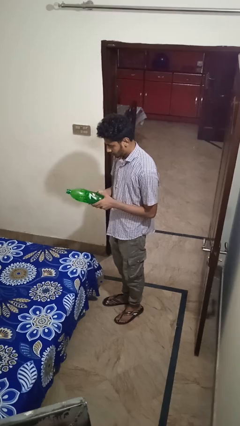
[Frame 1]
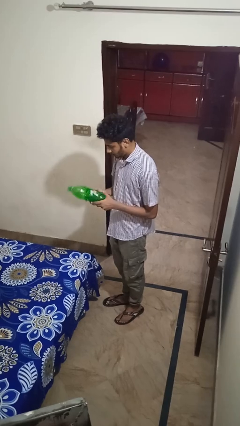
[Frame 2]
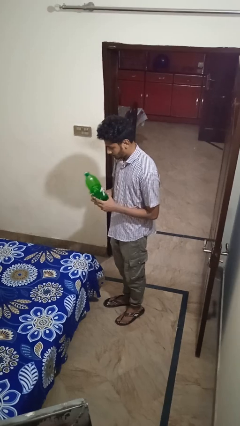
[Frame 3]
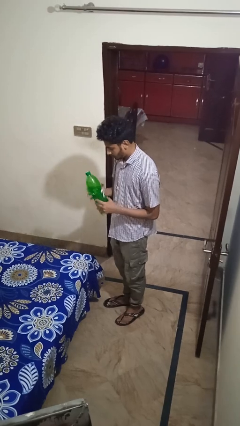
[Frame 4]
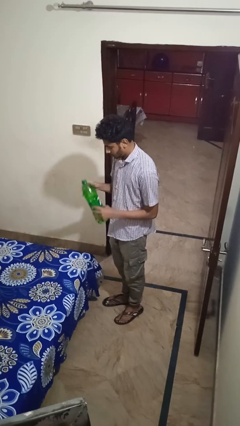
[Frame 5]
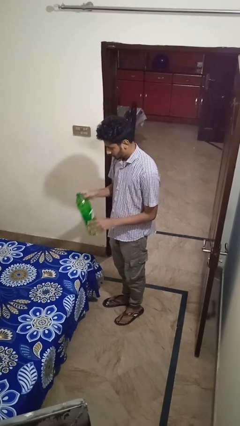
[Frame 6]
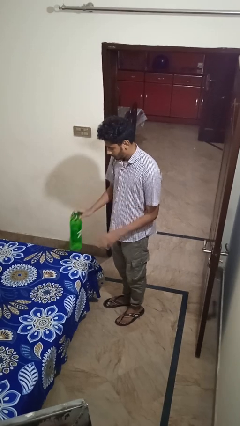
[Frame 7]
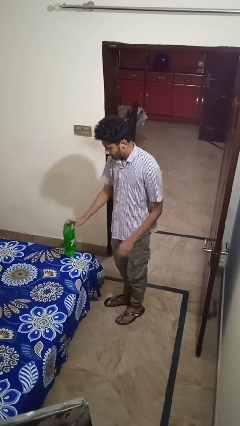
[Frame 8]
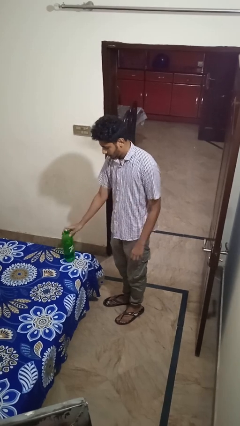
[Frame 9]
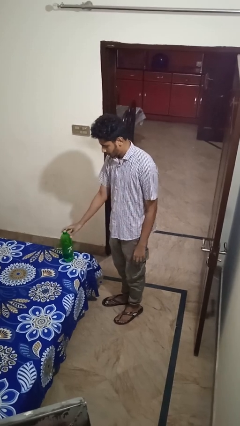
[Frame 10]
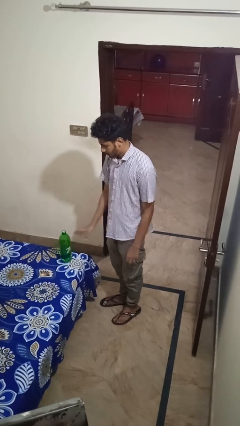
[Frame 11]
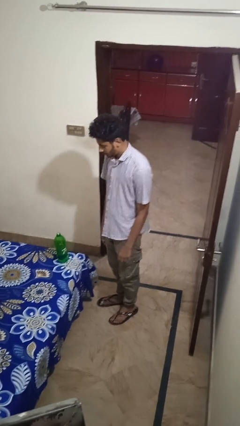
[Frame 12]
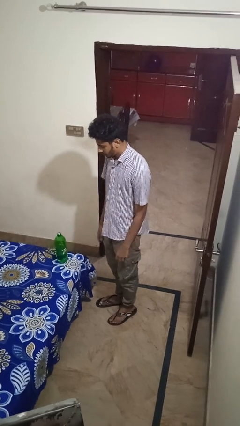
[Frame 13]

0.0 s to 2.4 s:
person puts down object on bed

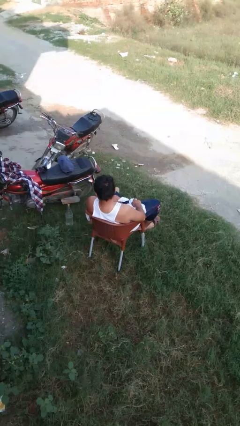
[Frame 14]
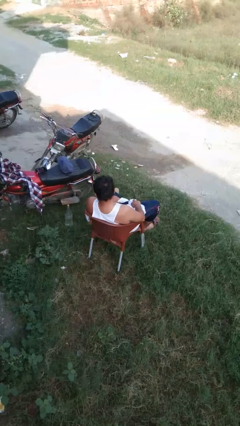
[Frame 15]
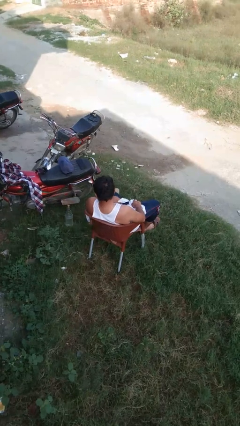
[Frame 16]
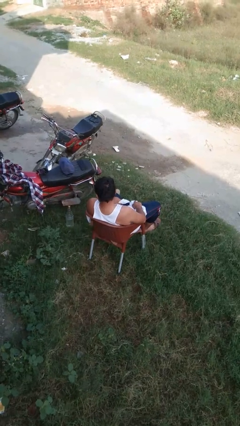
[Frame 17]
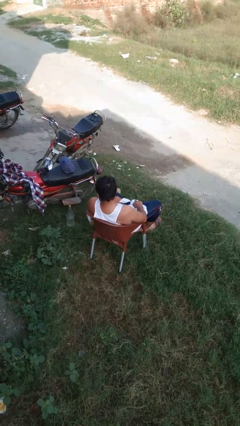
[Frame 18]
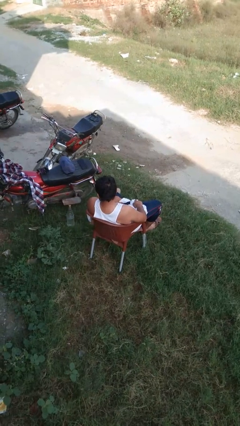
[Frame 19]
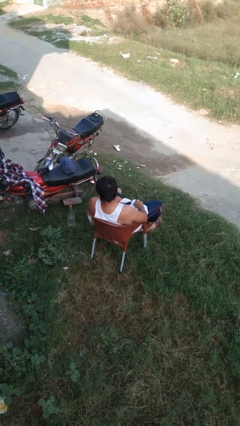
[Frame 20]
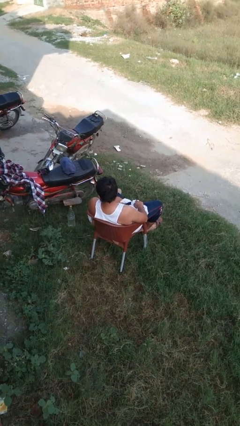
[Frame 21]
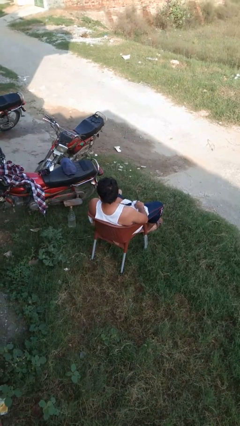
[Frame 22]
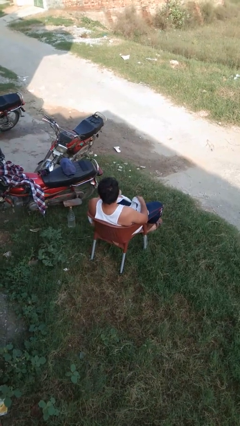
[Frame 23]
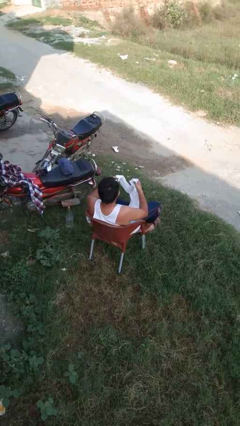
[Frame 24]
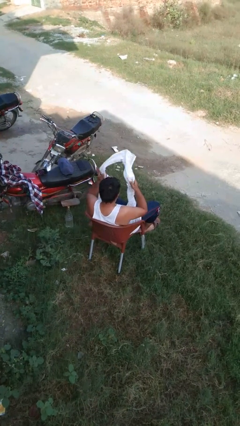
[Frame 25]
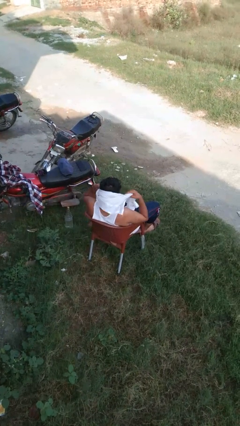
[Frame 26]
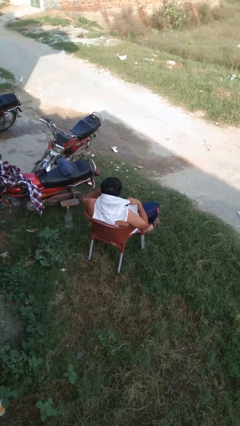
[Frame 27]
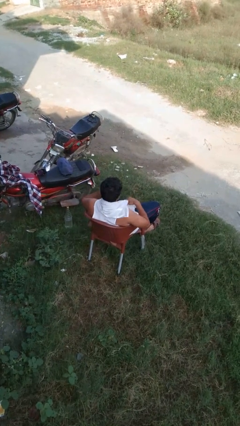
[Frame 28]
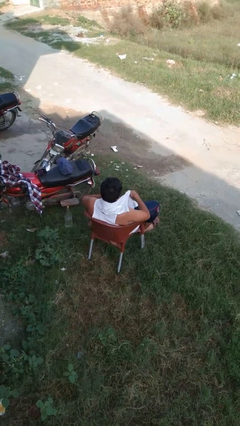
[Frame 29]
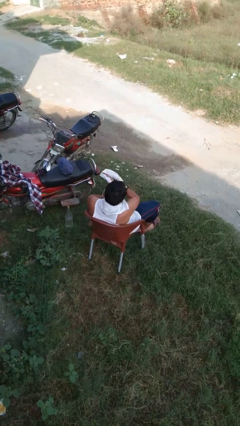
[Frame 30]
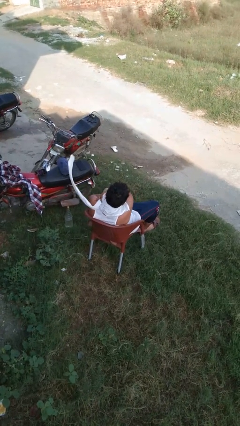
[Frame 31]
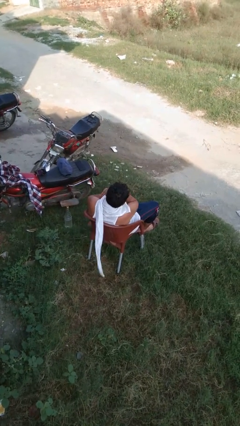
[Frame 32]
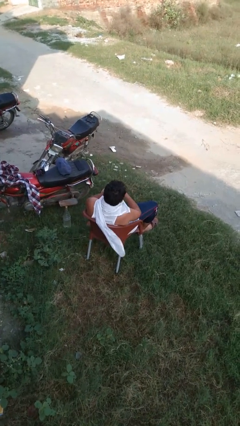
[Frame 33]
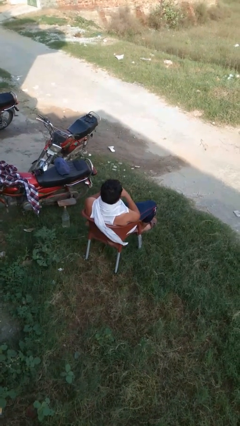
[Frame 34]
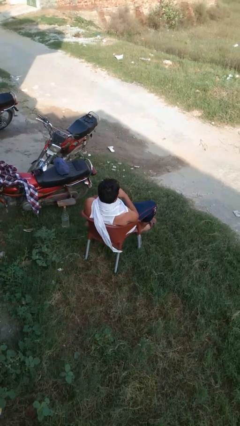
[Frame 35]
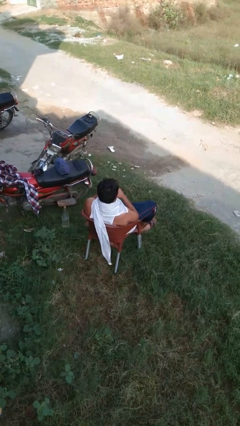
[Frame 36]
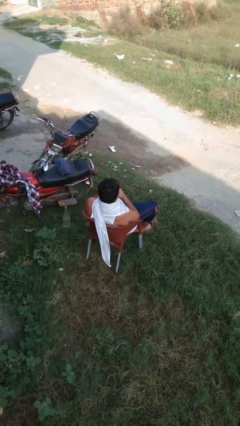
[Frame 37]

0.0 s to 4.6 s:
person puts on scarf

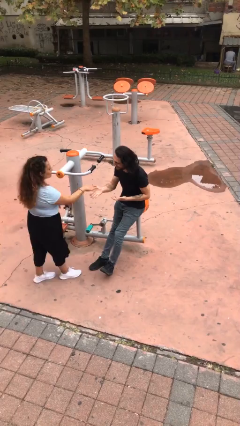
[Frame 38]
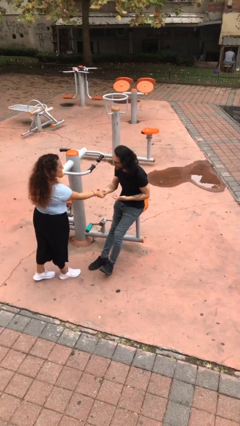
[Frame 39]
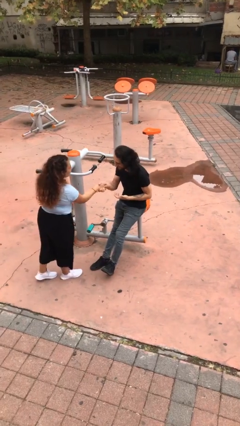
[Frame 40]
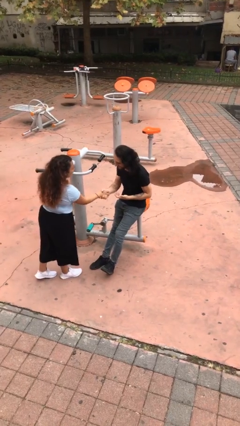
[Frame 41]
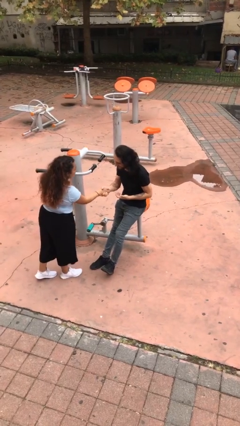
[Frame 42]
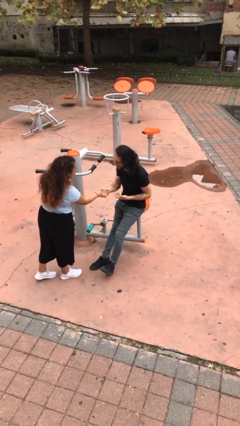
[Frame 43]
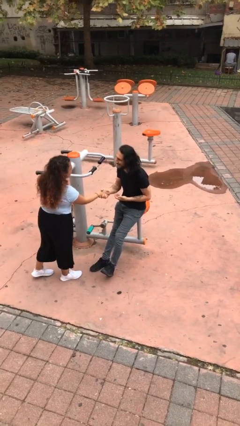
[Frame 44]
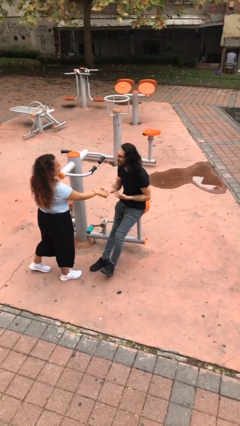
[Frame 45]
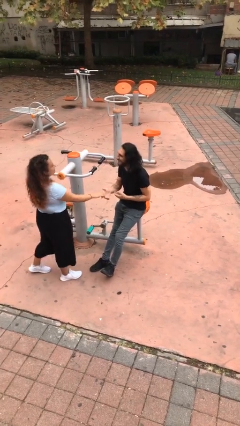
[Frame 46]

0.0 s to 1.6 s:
person shakes hand

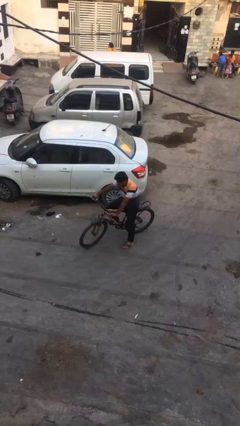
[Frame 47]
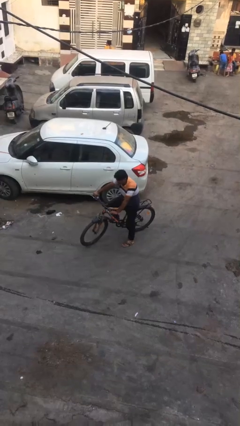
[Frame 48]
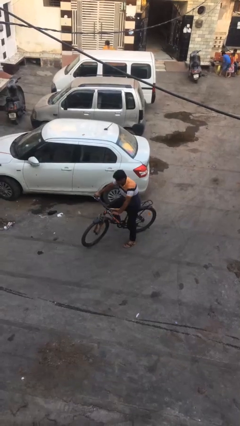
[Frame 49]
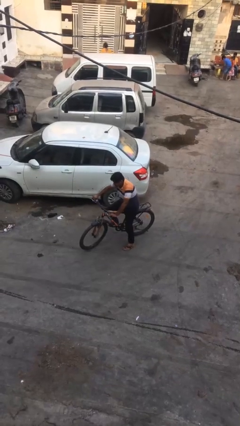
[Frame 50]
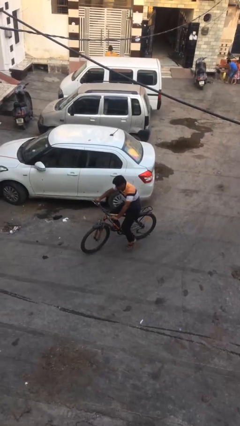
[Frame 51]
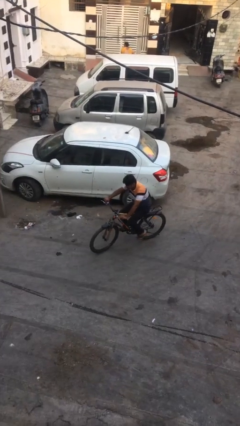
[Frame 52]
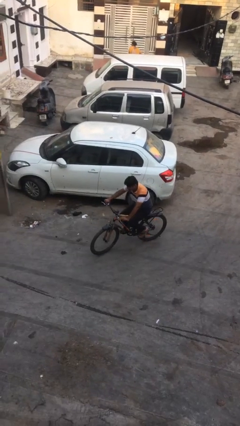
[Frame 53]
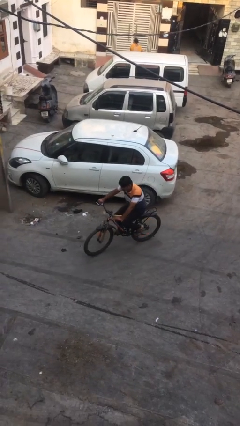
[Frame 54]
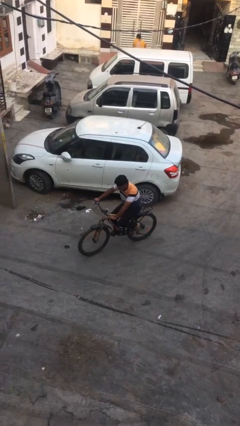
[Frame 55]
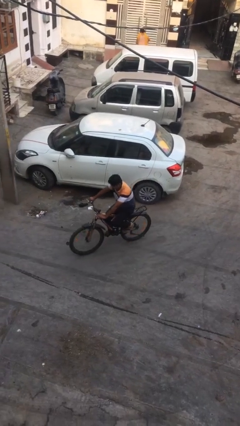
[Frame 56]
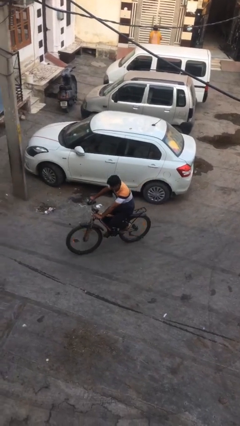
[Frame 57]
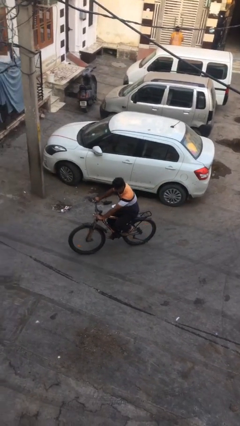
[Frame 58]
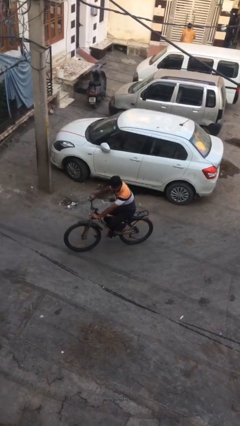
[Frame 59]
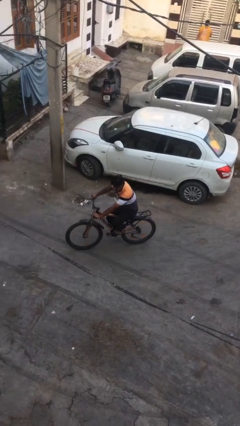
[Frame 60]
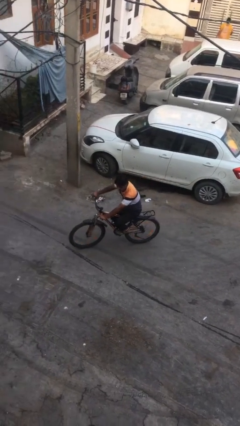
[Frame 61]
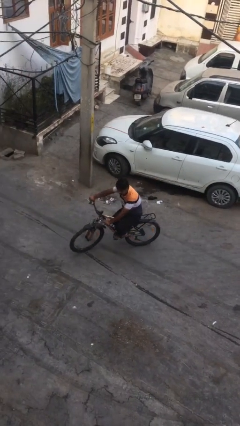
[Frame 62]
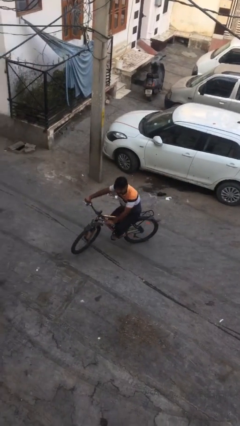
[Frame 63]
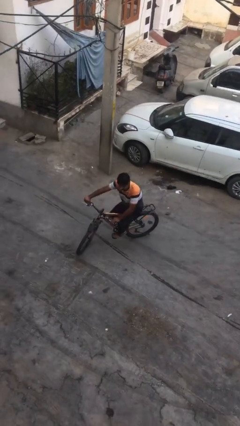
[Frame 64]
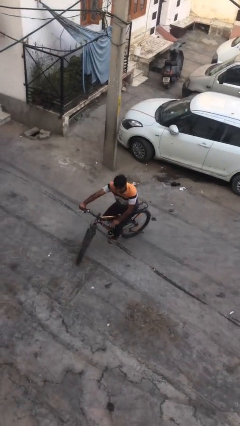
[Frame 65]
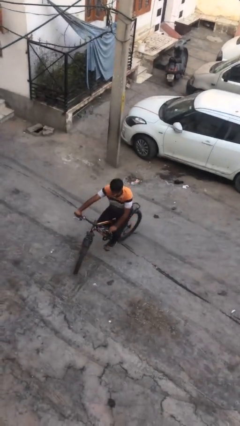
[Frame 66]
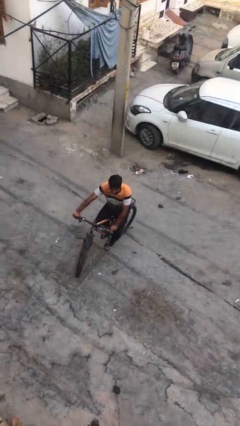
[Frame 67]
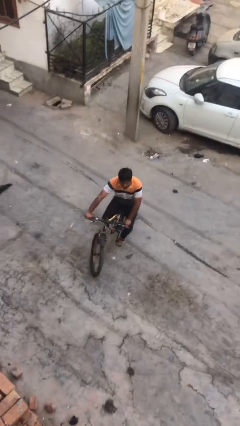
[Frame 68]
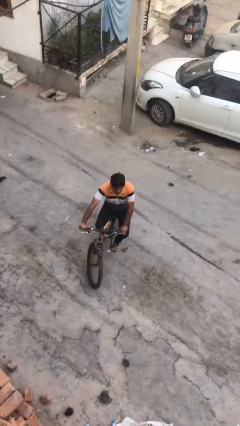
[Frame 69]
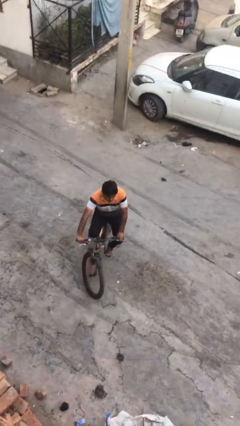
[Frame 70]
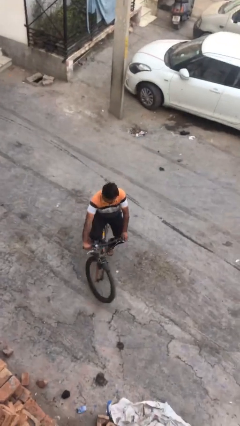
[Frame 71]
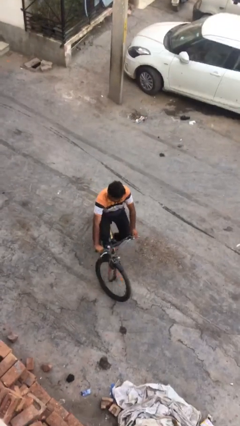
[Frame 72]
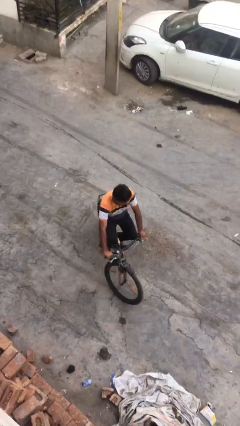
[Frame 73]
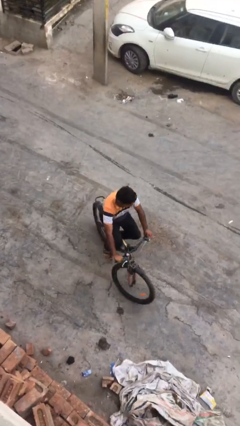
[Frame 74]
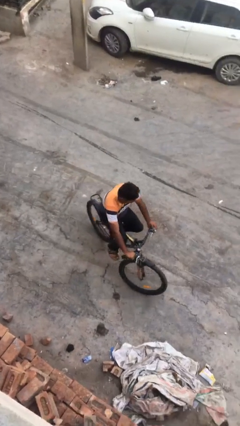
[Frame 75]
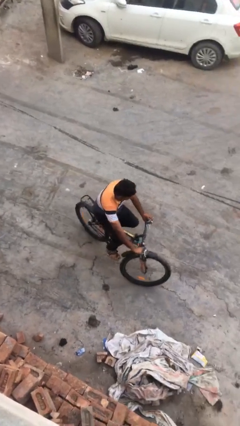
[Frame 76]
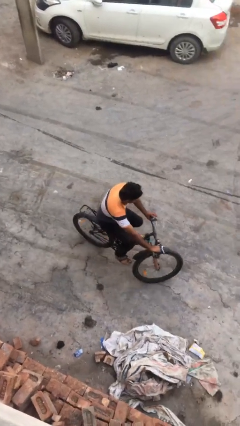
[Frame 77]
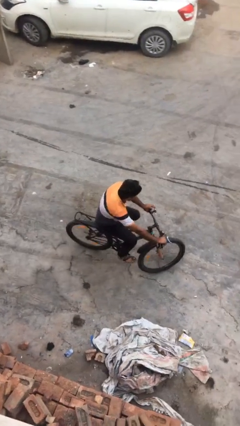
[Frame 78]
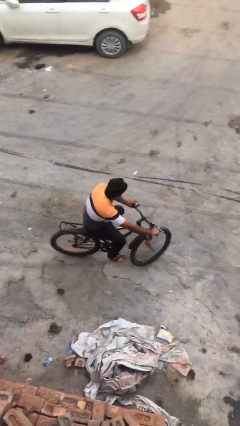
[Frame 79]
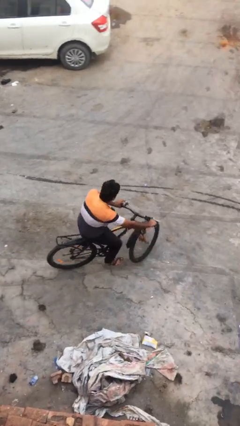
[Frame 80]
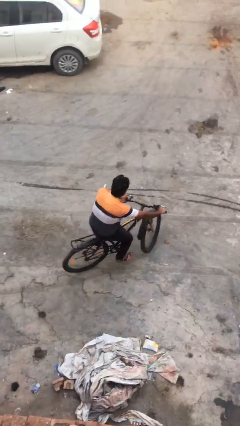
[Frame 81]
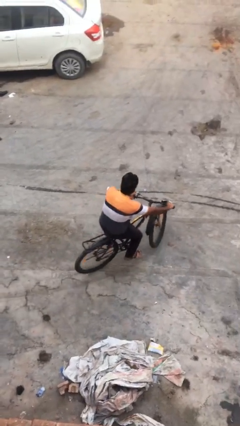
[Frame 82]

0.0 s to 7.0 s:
person rides bicycle

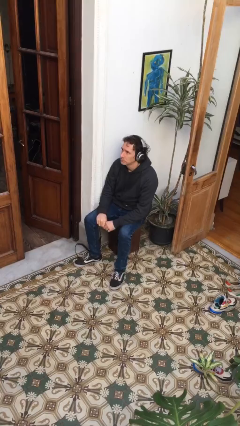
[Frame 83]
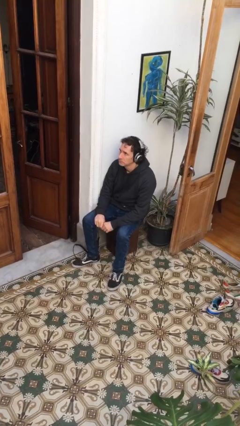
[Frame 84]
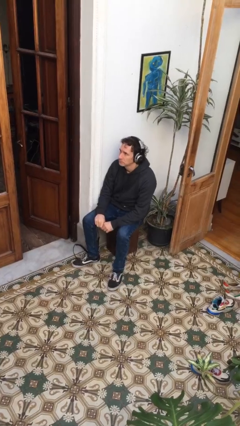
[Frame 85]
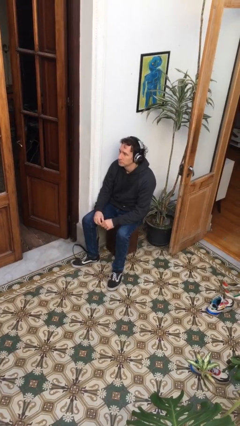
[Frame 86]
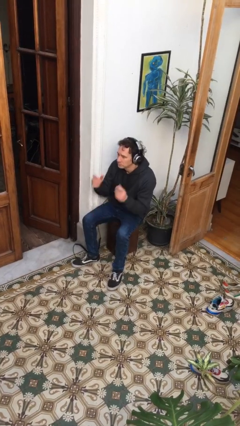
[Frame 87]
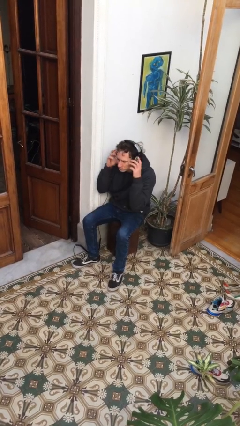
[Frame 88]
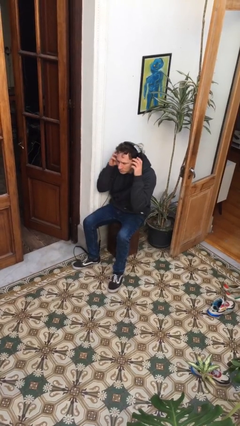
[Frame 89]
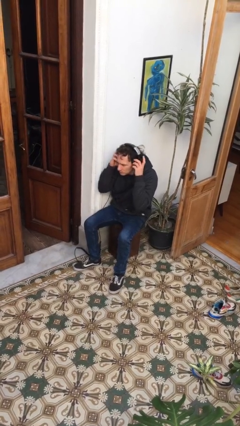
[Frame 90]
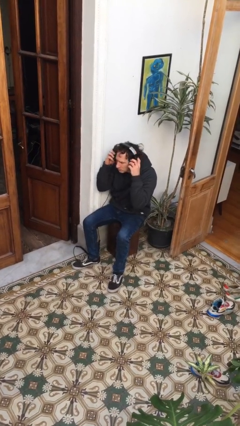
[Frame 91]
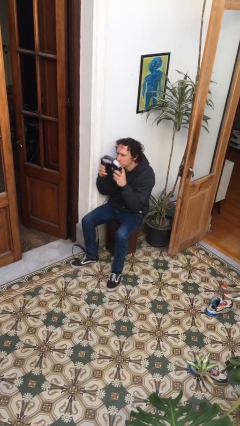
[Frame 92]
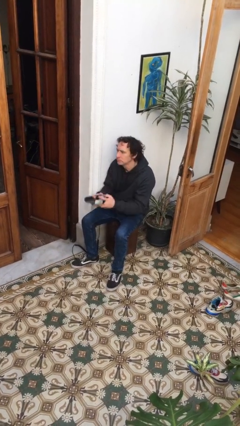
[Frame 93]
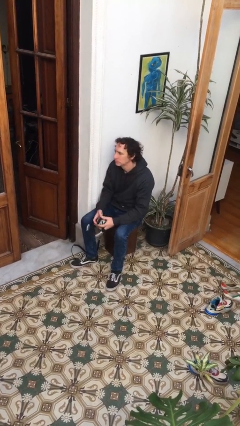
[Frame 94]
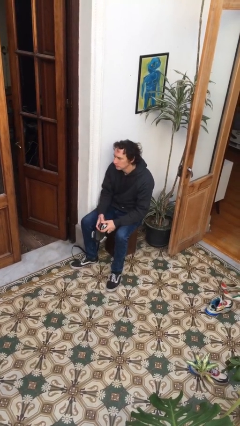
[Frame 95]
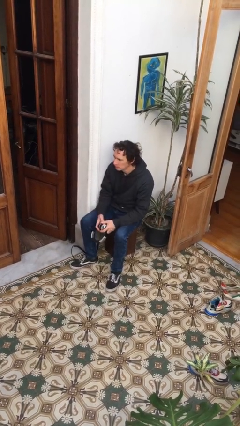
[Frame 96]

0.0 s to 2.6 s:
person takes off headphones
